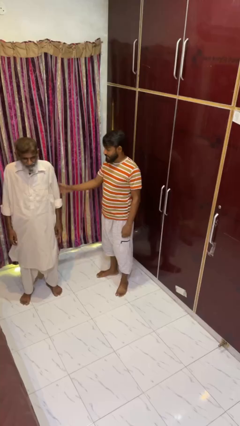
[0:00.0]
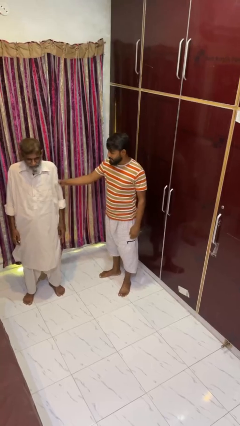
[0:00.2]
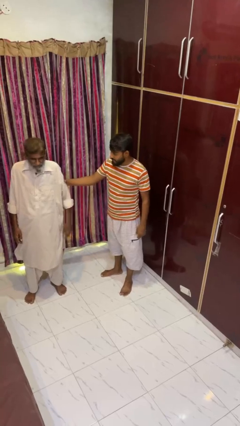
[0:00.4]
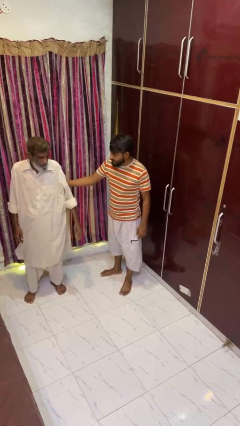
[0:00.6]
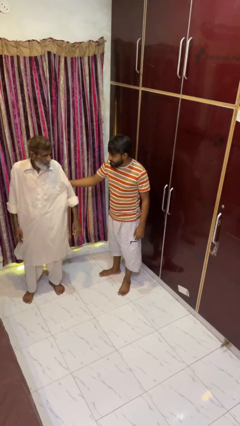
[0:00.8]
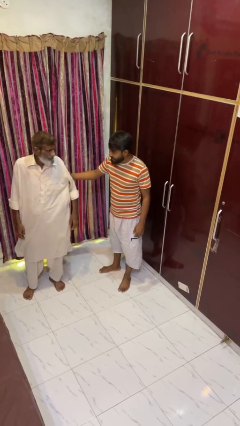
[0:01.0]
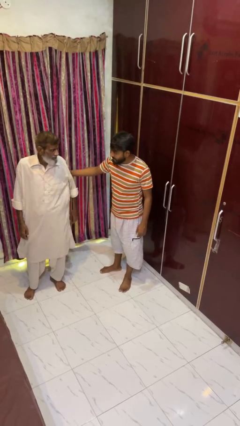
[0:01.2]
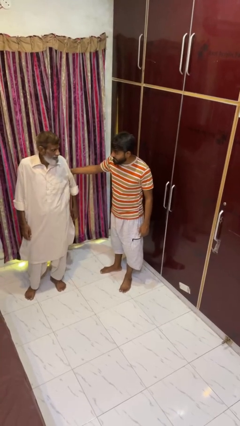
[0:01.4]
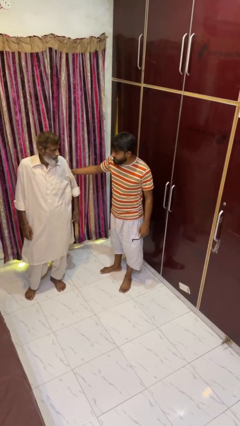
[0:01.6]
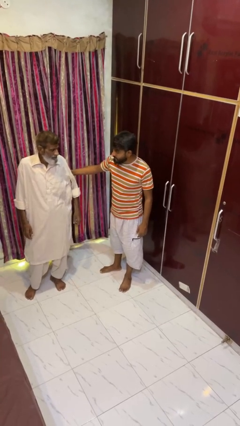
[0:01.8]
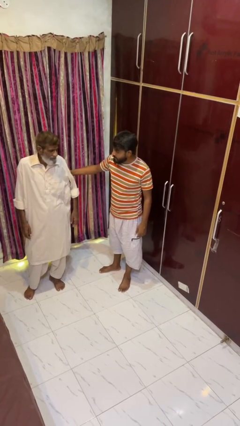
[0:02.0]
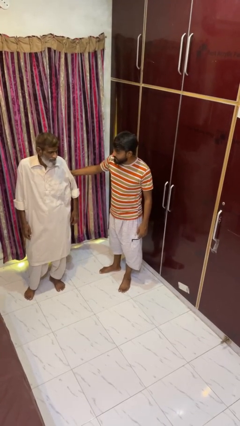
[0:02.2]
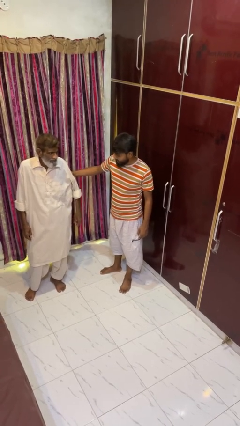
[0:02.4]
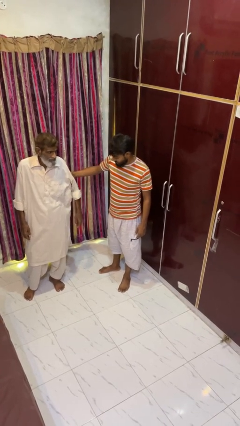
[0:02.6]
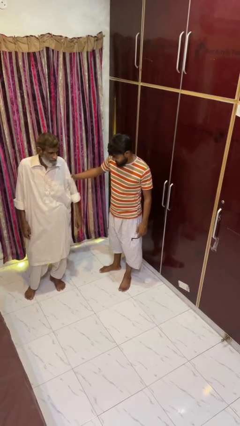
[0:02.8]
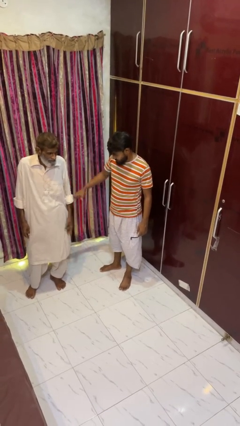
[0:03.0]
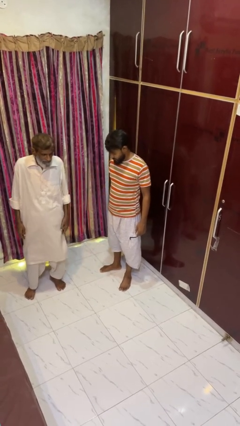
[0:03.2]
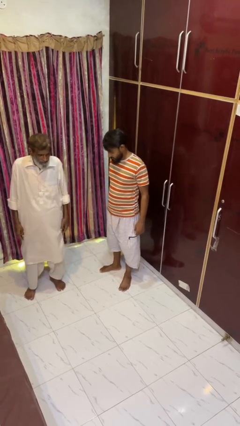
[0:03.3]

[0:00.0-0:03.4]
person grabs person by bicep

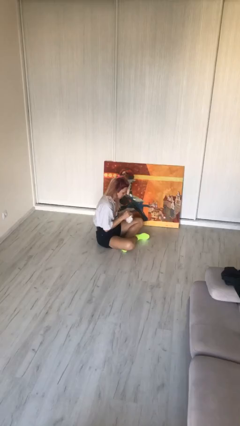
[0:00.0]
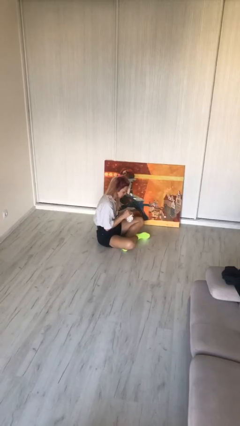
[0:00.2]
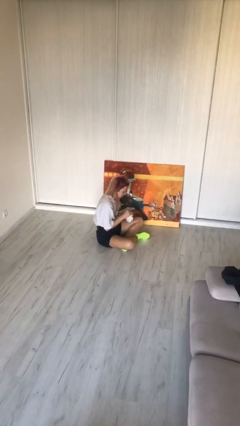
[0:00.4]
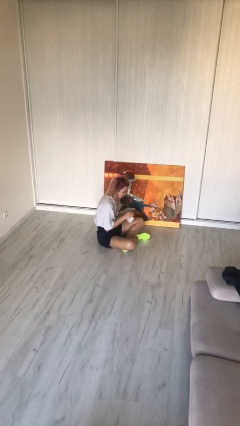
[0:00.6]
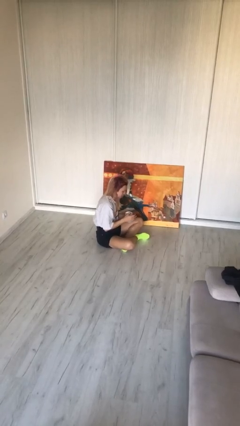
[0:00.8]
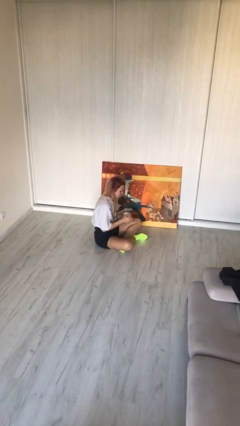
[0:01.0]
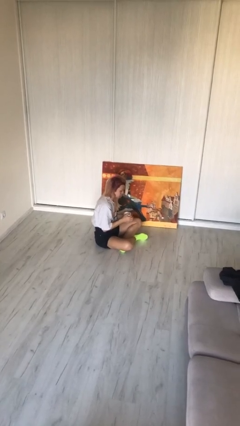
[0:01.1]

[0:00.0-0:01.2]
person stirs mug

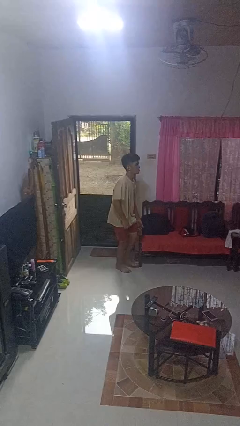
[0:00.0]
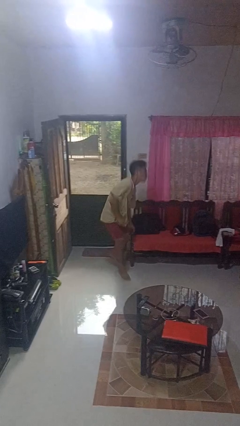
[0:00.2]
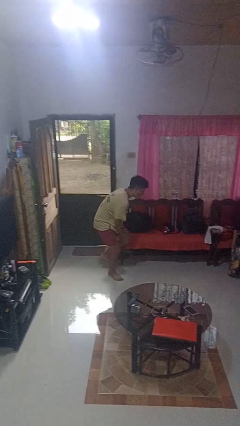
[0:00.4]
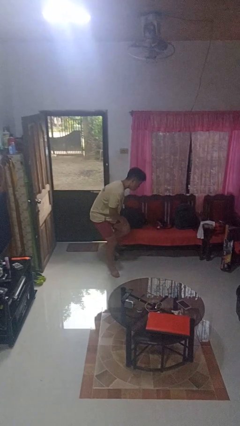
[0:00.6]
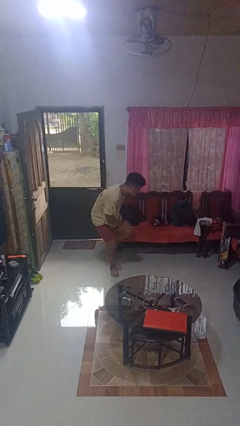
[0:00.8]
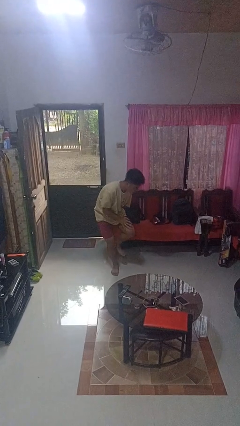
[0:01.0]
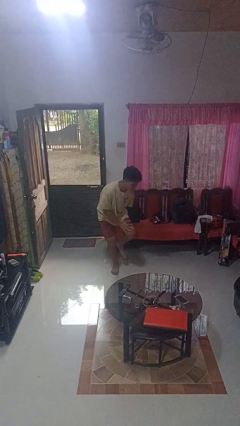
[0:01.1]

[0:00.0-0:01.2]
person trips on object on floor

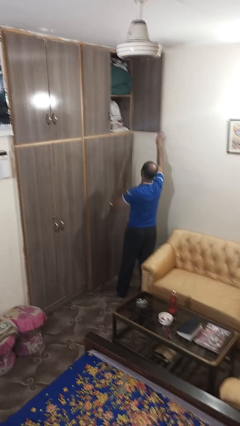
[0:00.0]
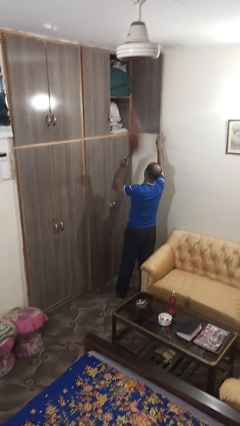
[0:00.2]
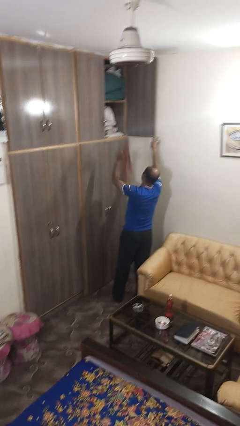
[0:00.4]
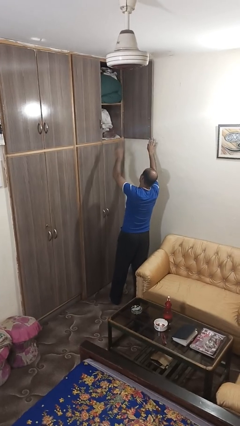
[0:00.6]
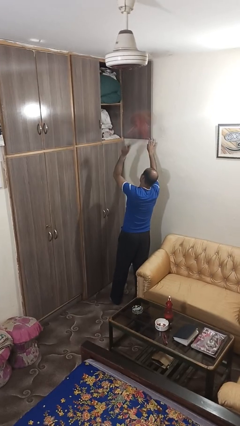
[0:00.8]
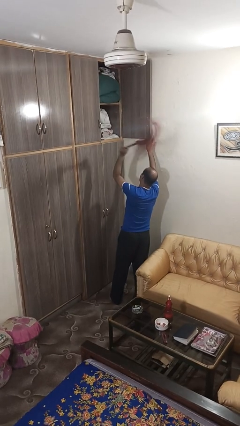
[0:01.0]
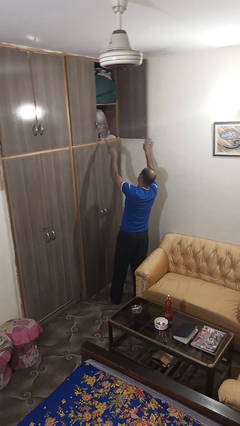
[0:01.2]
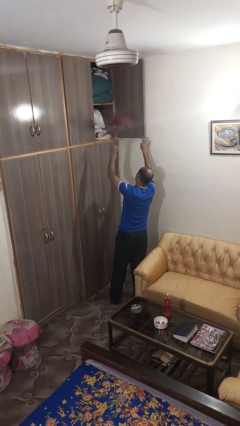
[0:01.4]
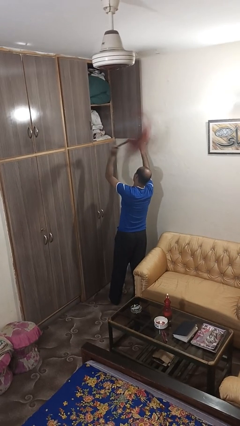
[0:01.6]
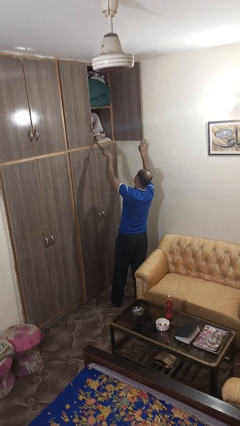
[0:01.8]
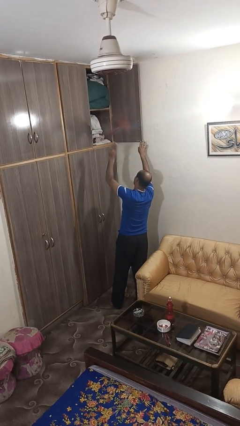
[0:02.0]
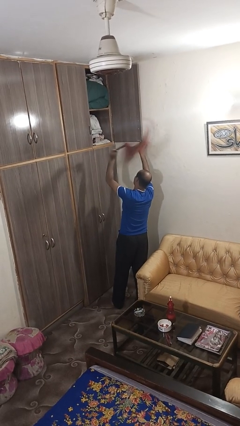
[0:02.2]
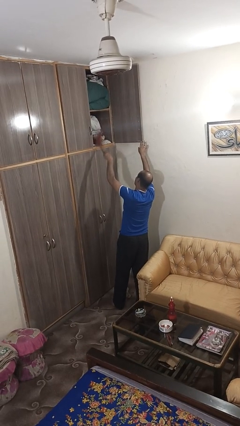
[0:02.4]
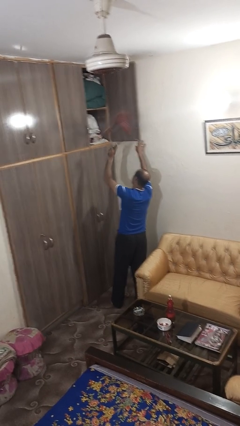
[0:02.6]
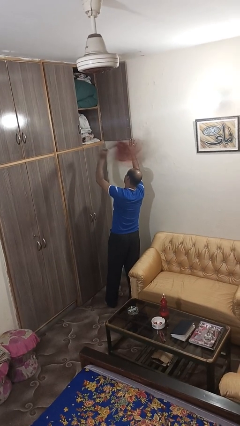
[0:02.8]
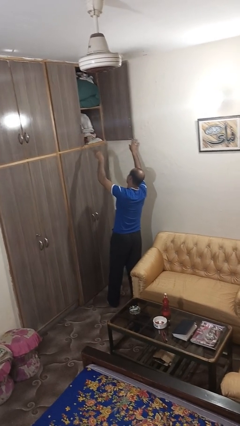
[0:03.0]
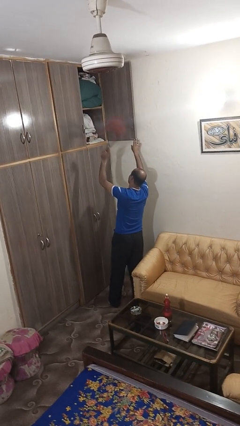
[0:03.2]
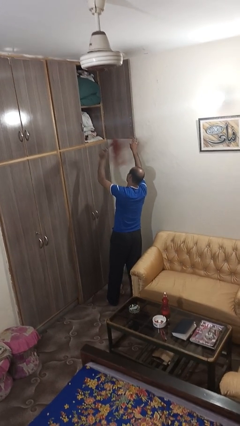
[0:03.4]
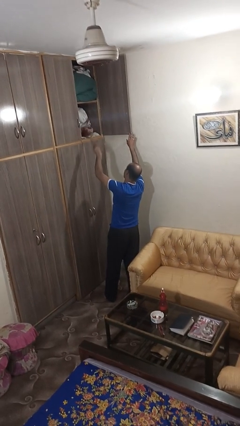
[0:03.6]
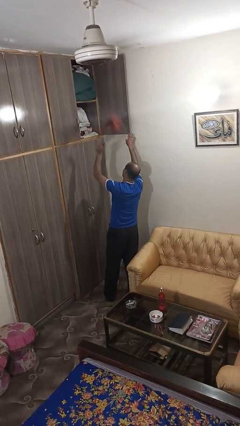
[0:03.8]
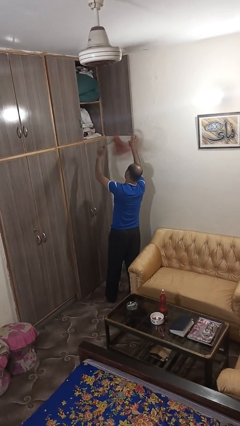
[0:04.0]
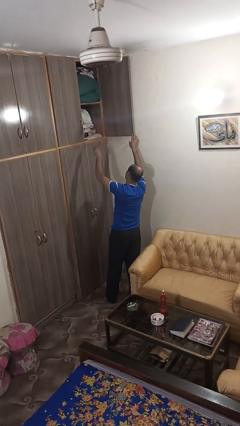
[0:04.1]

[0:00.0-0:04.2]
person dusts furniture

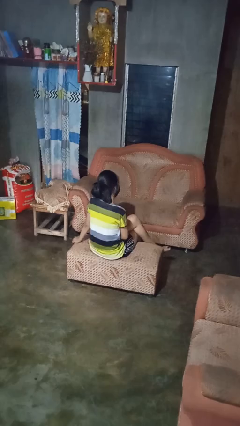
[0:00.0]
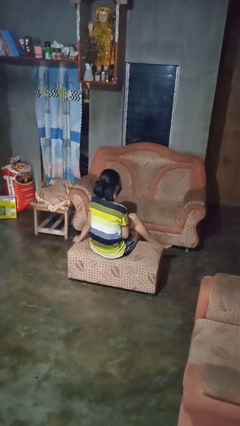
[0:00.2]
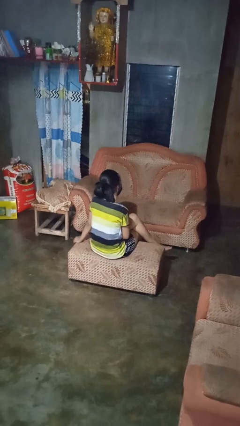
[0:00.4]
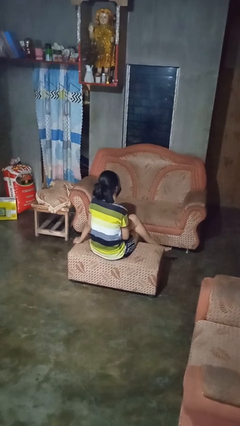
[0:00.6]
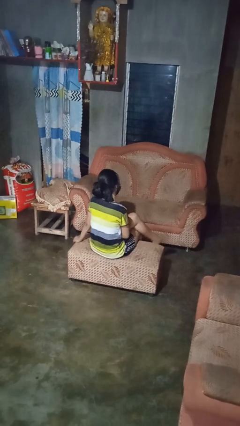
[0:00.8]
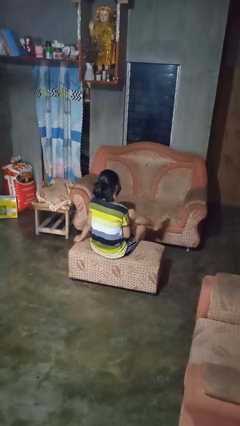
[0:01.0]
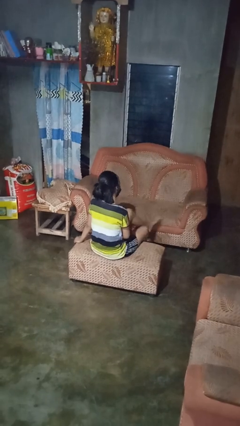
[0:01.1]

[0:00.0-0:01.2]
person crosses legs

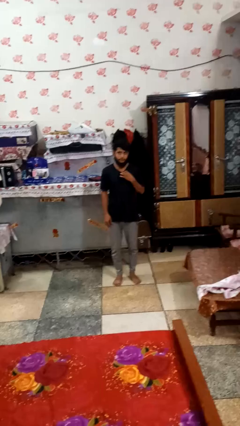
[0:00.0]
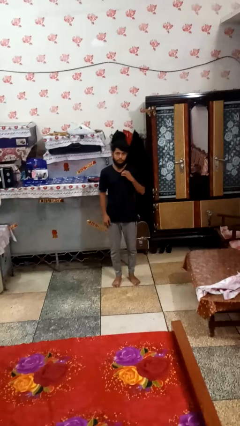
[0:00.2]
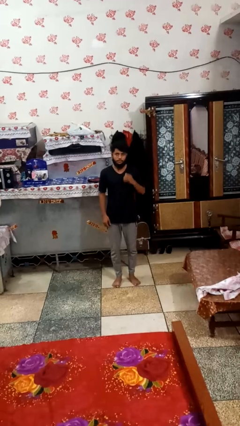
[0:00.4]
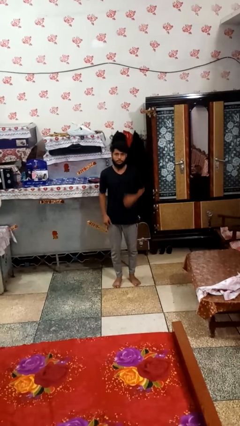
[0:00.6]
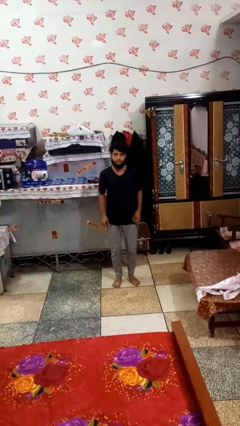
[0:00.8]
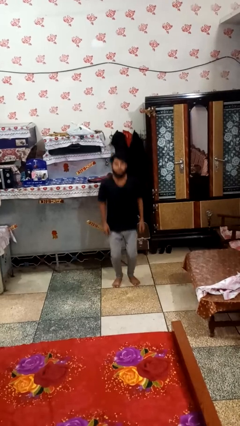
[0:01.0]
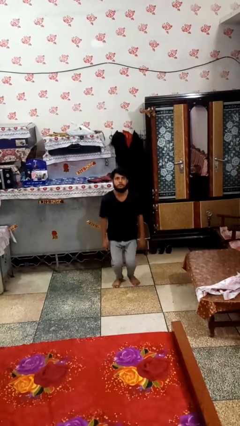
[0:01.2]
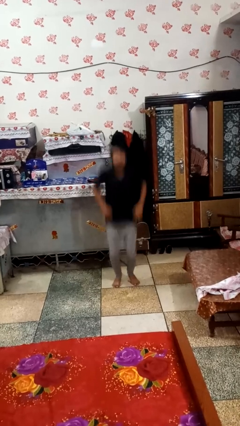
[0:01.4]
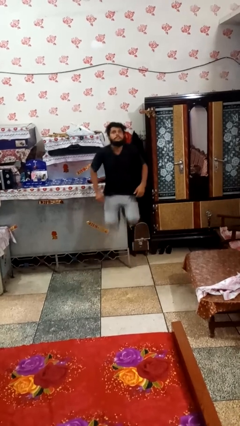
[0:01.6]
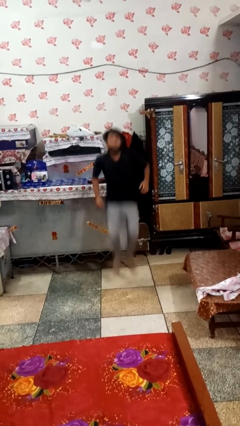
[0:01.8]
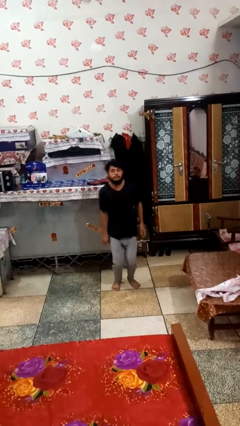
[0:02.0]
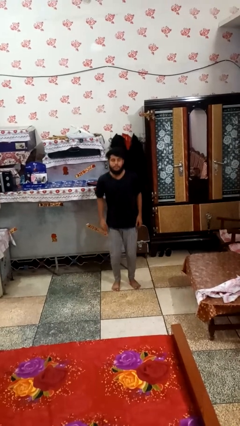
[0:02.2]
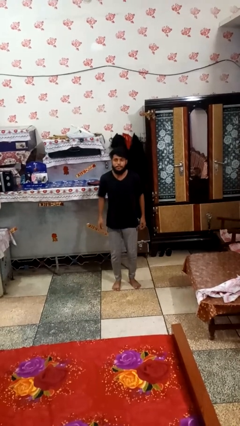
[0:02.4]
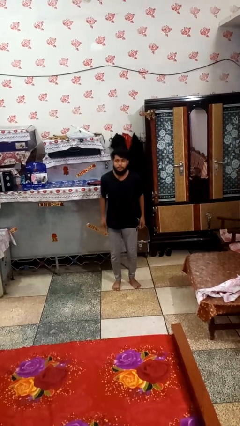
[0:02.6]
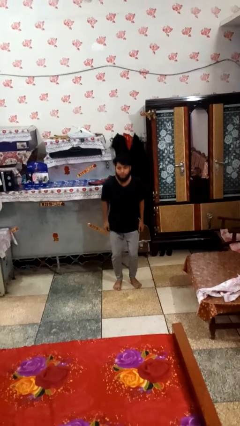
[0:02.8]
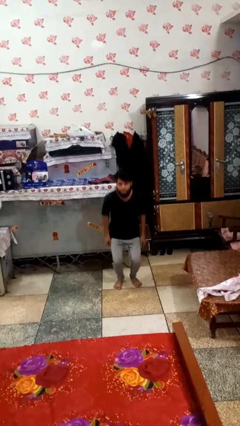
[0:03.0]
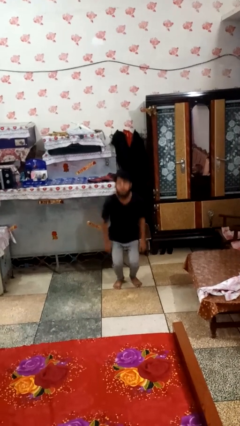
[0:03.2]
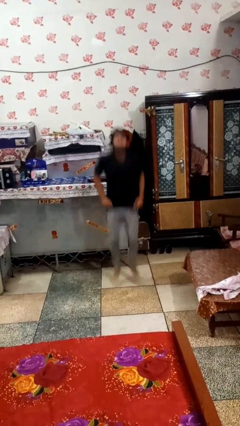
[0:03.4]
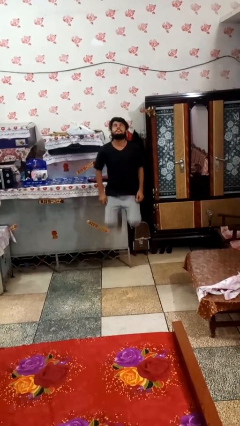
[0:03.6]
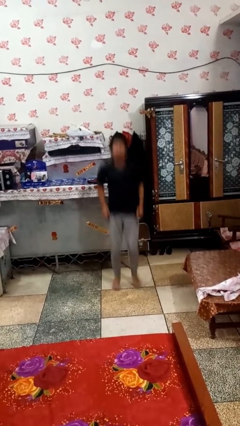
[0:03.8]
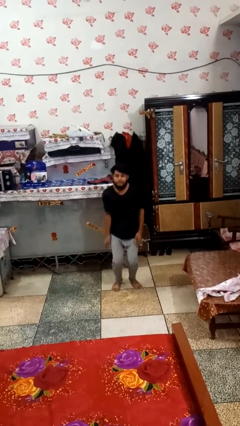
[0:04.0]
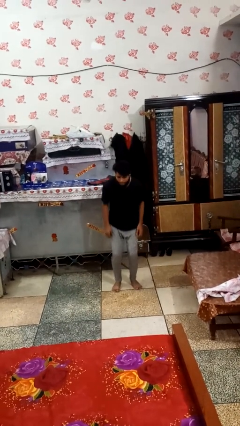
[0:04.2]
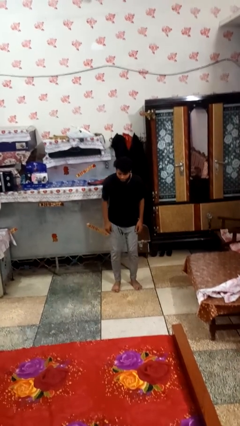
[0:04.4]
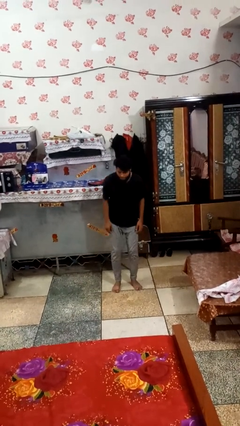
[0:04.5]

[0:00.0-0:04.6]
person jumps

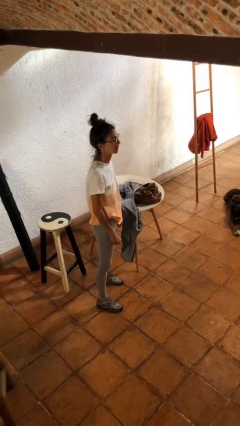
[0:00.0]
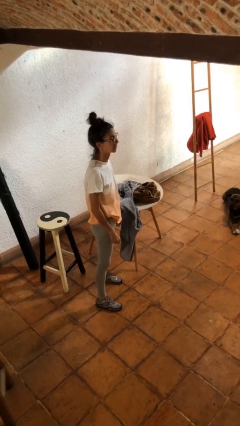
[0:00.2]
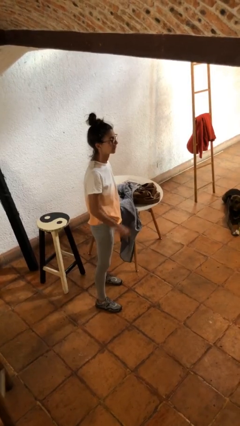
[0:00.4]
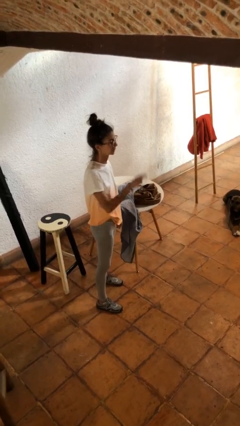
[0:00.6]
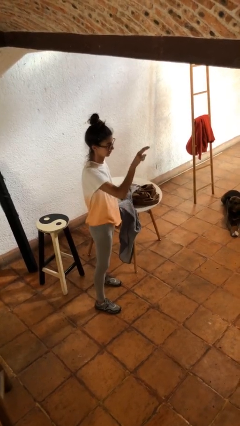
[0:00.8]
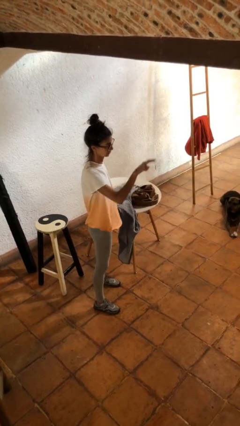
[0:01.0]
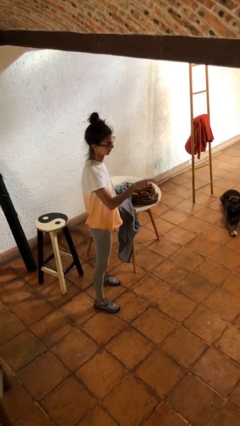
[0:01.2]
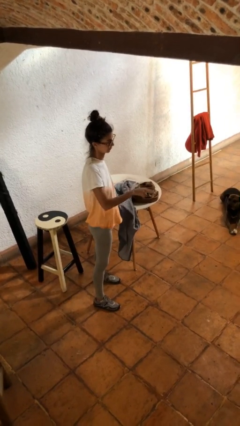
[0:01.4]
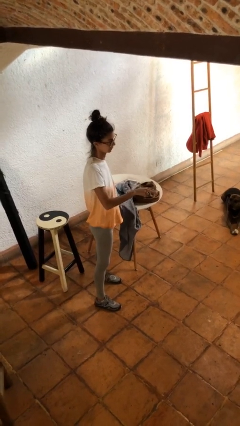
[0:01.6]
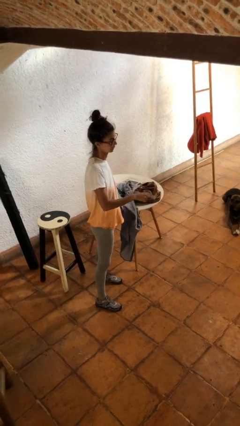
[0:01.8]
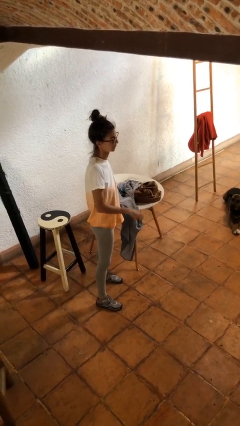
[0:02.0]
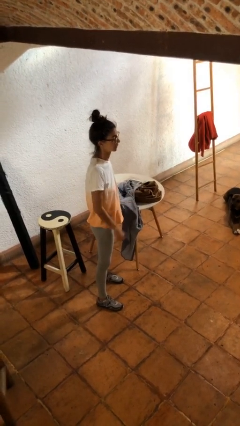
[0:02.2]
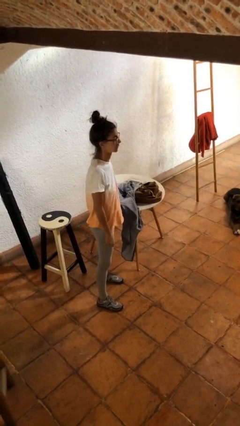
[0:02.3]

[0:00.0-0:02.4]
person gestures swipe down
